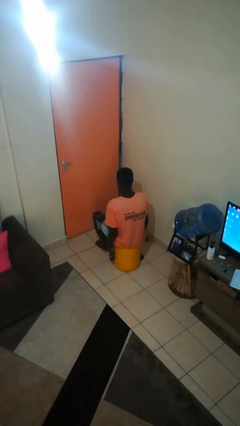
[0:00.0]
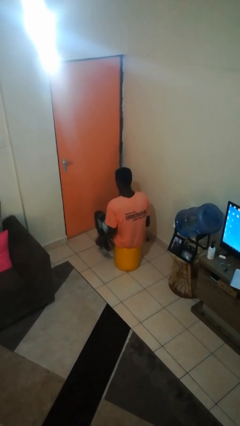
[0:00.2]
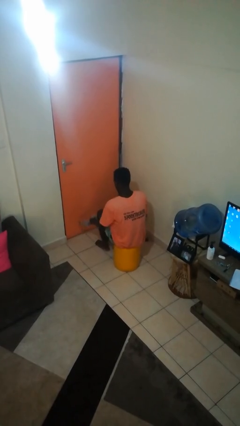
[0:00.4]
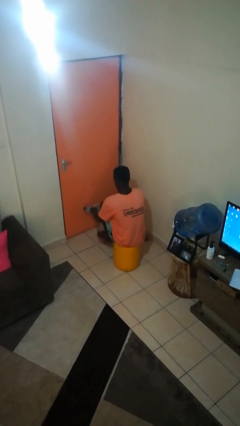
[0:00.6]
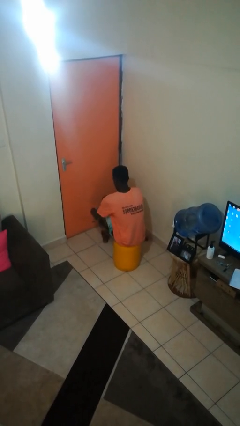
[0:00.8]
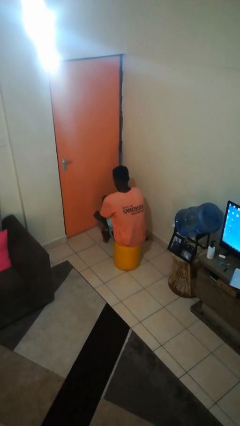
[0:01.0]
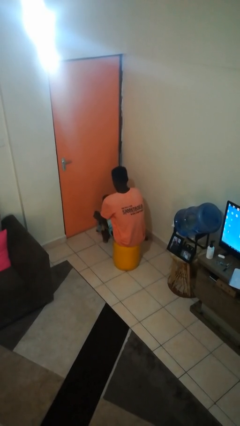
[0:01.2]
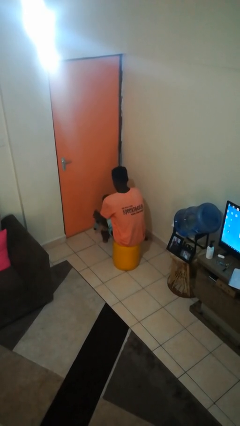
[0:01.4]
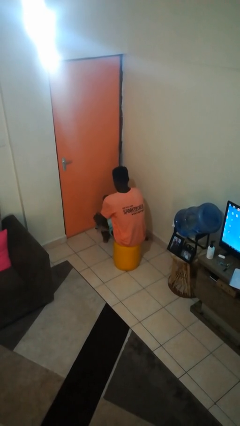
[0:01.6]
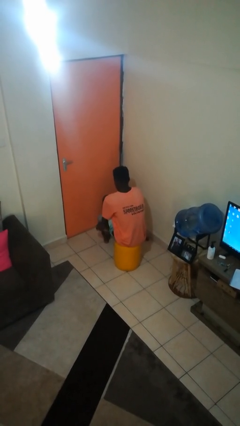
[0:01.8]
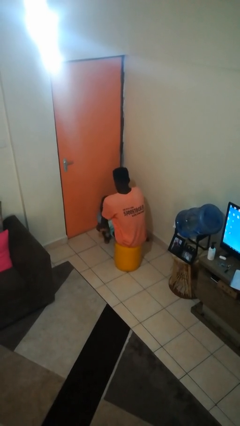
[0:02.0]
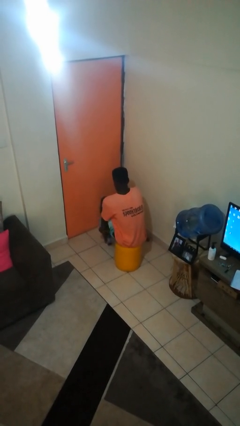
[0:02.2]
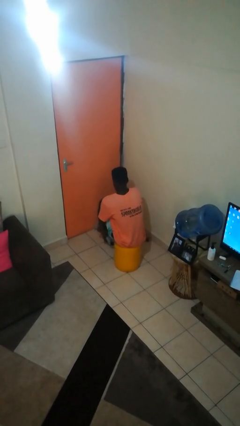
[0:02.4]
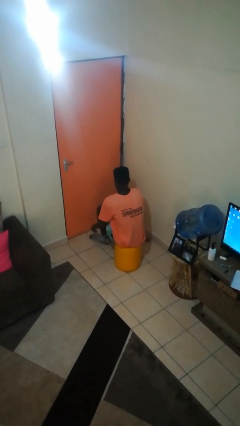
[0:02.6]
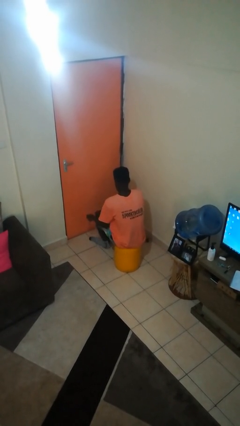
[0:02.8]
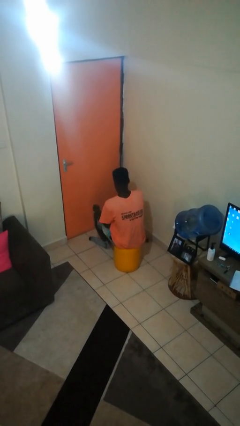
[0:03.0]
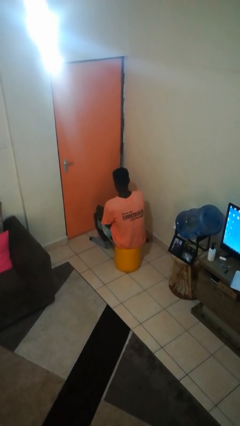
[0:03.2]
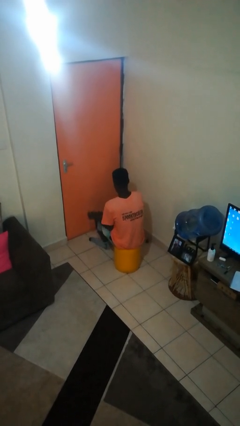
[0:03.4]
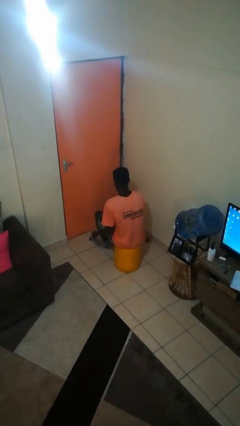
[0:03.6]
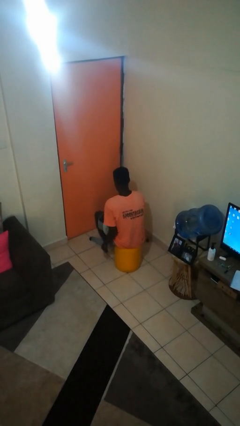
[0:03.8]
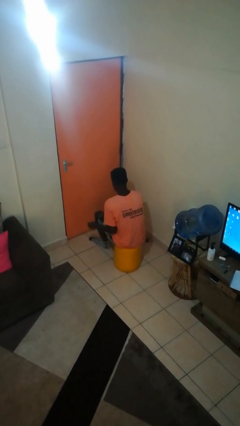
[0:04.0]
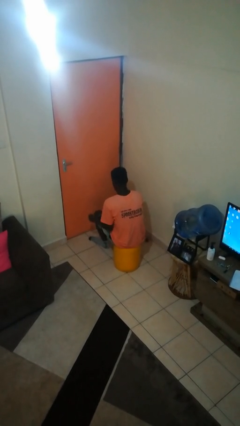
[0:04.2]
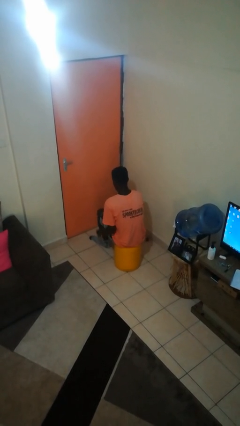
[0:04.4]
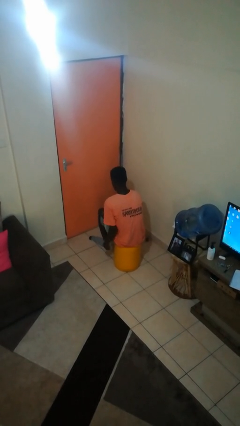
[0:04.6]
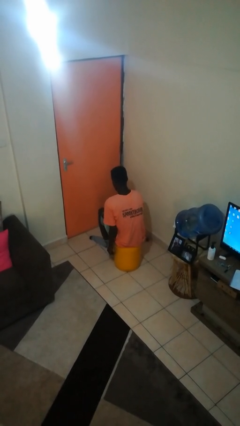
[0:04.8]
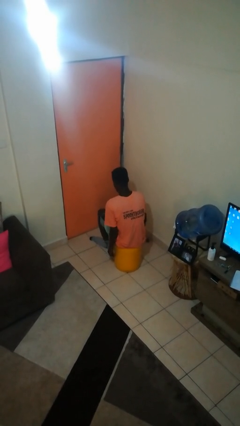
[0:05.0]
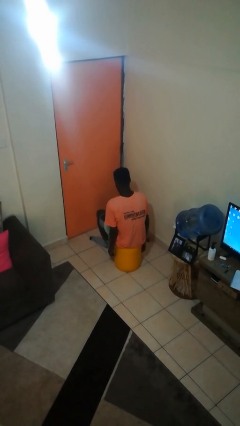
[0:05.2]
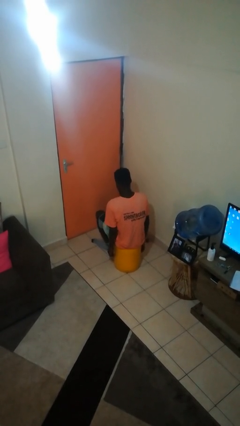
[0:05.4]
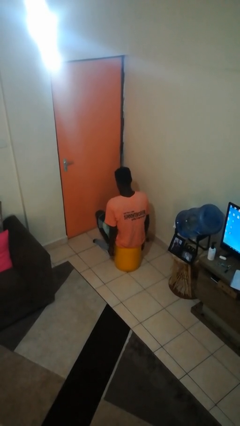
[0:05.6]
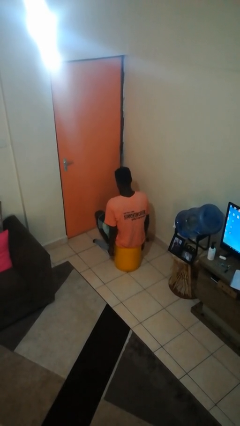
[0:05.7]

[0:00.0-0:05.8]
person puts on socks

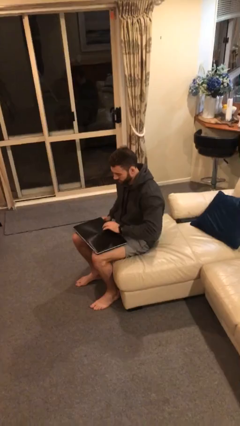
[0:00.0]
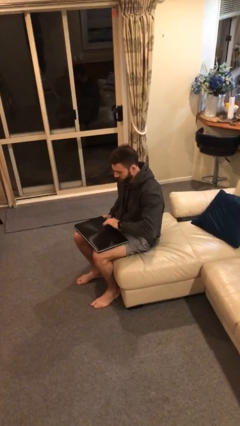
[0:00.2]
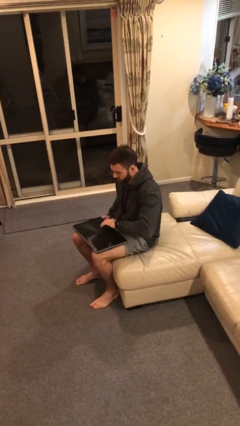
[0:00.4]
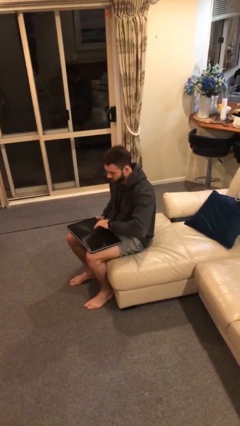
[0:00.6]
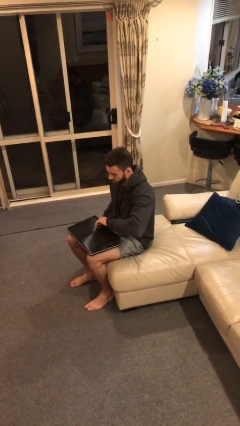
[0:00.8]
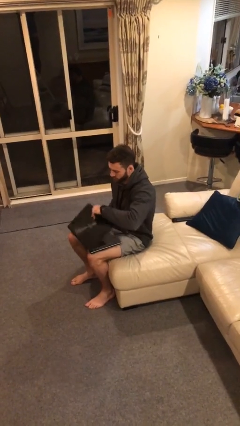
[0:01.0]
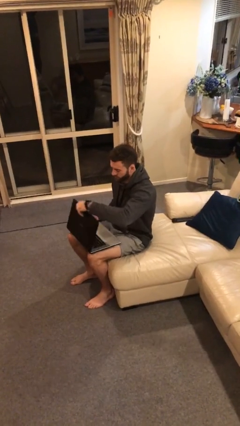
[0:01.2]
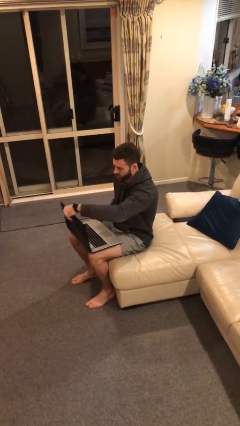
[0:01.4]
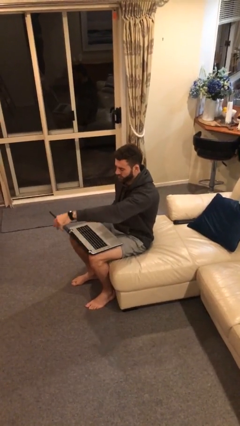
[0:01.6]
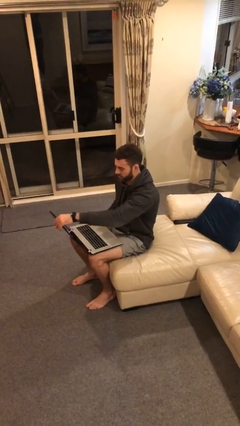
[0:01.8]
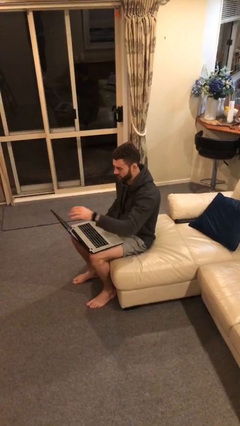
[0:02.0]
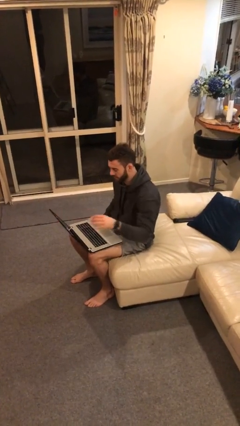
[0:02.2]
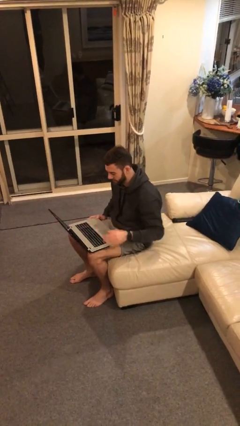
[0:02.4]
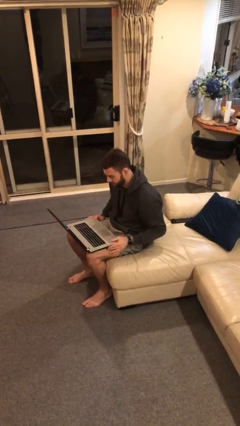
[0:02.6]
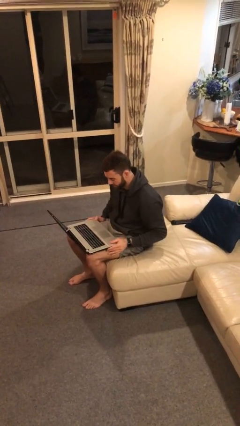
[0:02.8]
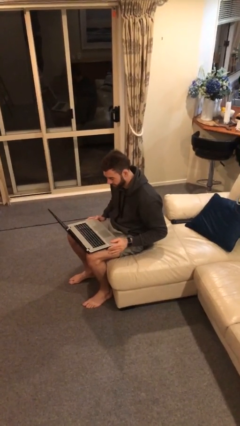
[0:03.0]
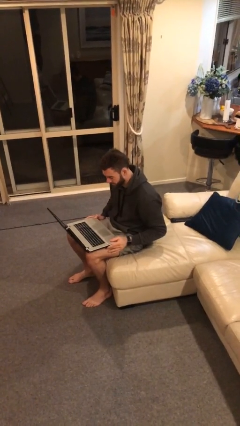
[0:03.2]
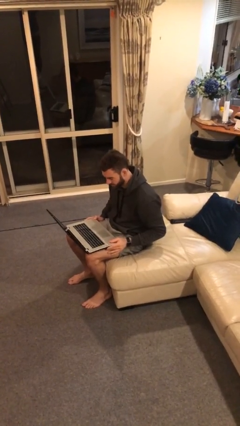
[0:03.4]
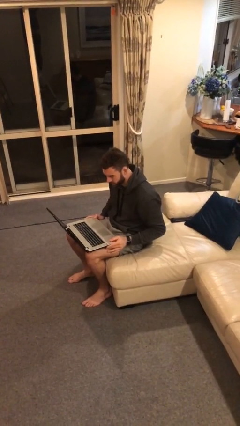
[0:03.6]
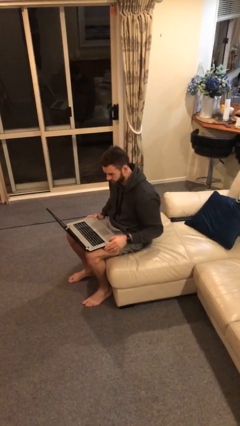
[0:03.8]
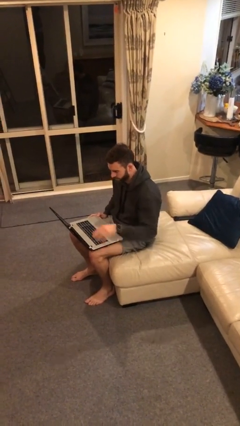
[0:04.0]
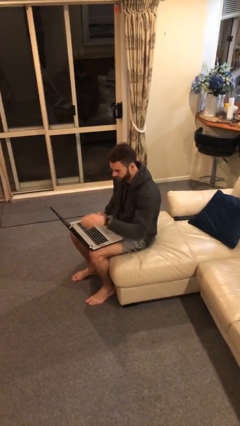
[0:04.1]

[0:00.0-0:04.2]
person opens laptop

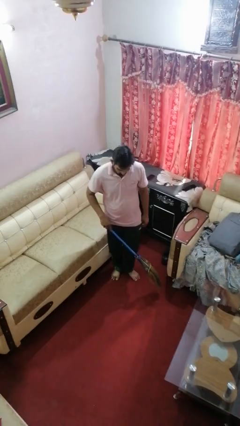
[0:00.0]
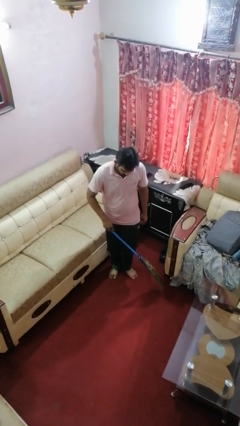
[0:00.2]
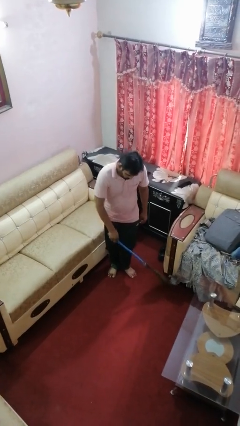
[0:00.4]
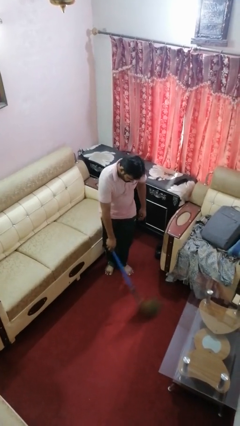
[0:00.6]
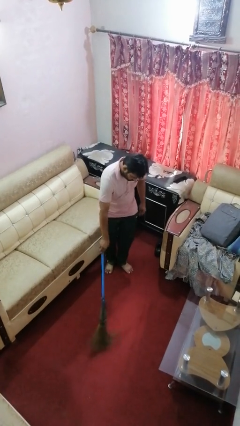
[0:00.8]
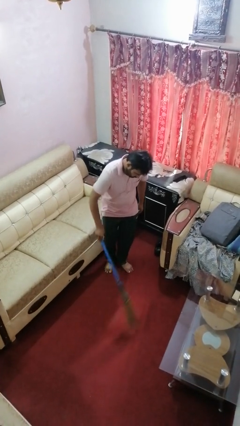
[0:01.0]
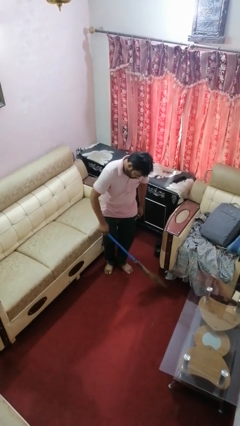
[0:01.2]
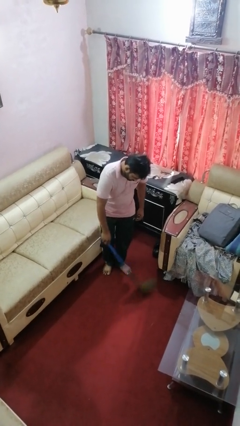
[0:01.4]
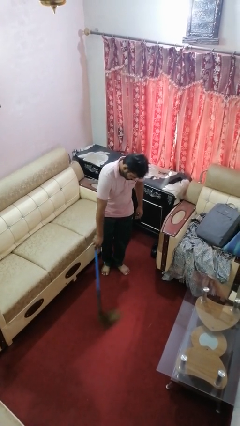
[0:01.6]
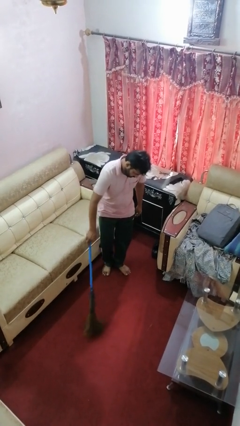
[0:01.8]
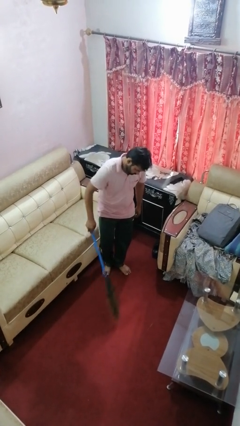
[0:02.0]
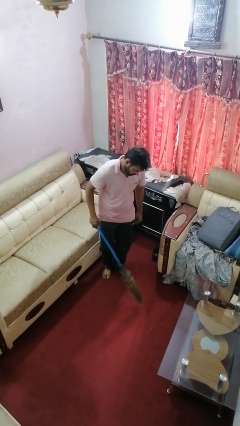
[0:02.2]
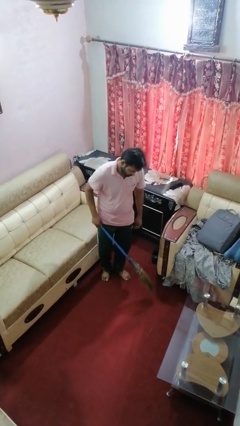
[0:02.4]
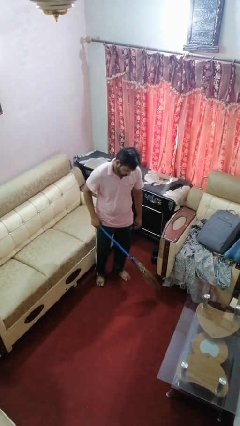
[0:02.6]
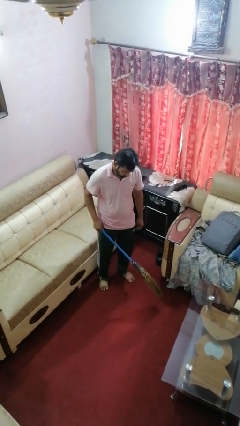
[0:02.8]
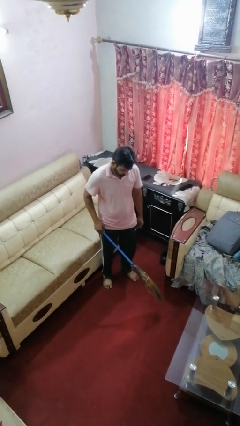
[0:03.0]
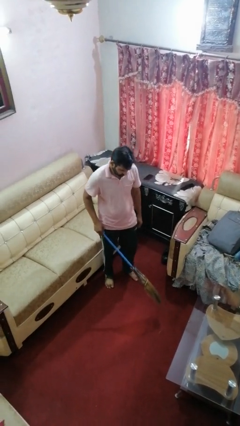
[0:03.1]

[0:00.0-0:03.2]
person sweeps floor

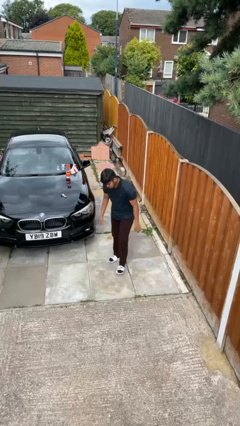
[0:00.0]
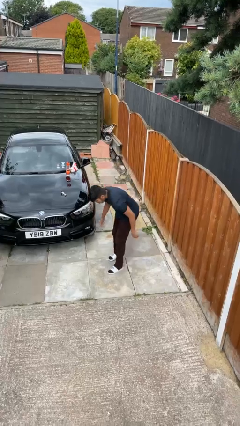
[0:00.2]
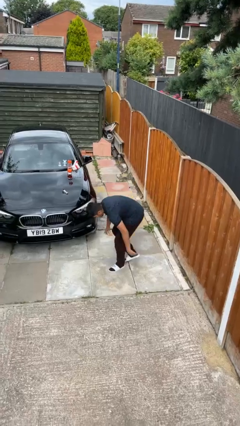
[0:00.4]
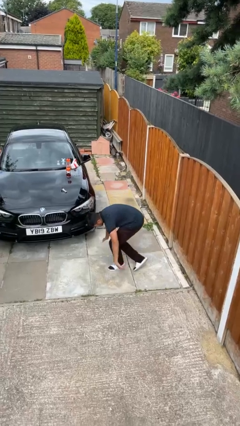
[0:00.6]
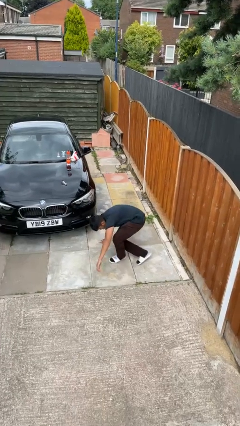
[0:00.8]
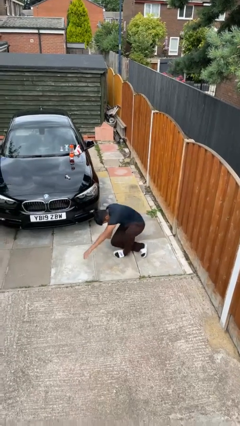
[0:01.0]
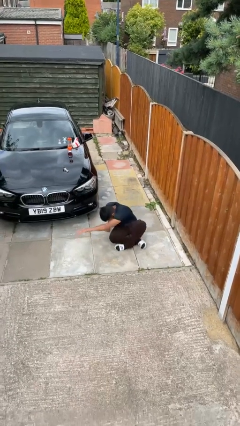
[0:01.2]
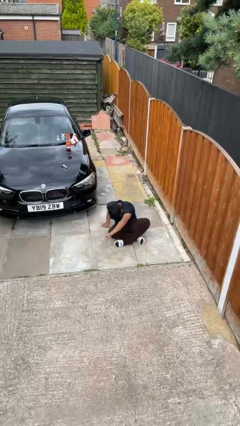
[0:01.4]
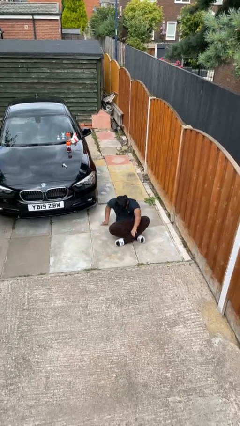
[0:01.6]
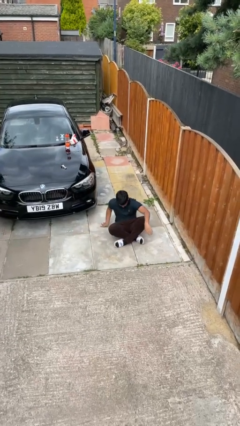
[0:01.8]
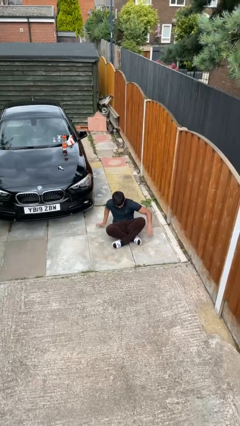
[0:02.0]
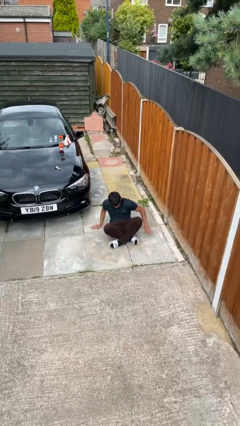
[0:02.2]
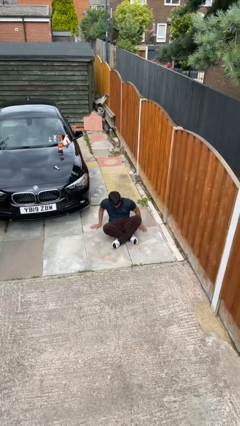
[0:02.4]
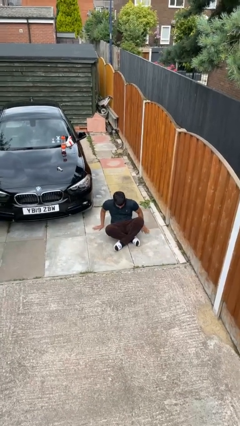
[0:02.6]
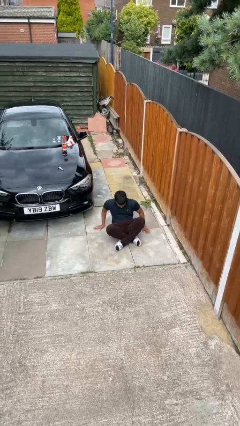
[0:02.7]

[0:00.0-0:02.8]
person sits crisscross

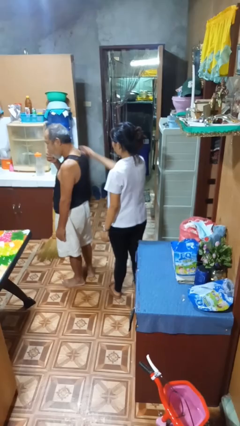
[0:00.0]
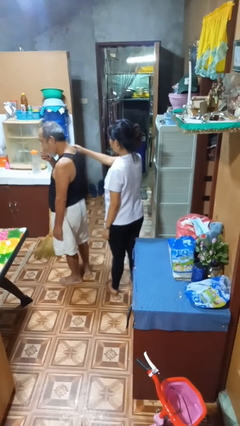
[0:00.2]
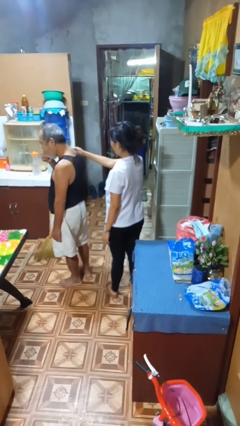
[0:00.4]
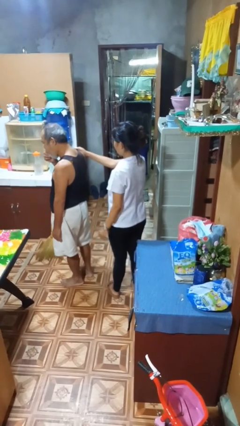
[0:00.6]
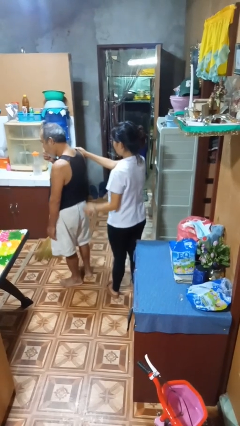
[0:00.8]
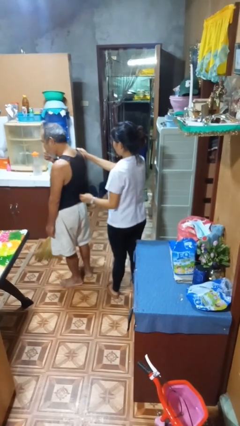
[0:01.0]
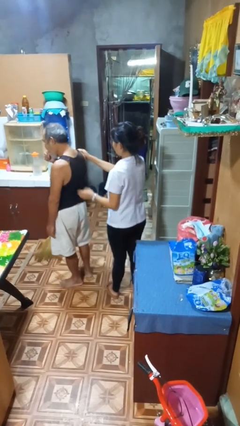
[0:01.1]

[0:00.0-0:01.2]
person grabs person by shoulder

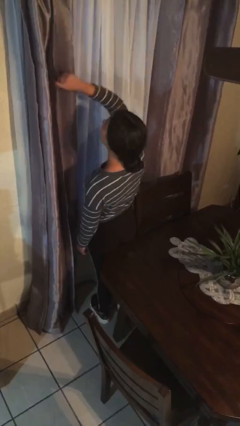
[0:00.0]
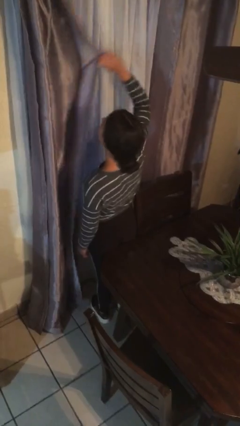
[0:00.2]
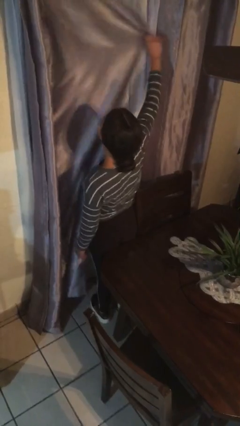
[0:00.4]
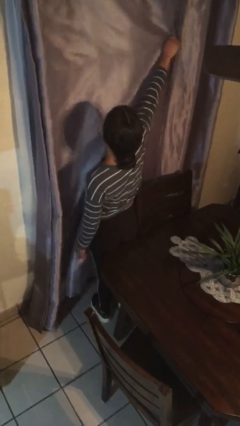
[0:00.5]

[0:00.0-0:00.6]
person closes curtains
